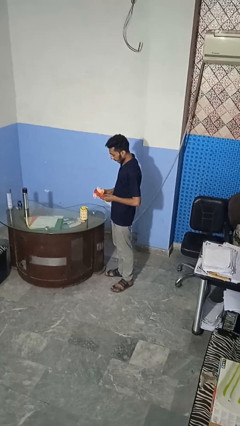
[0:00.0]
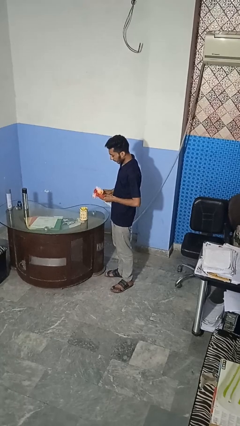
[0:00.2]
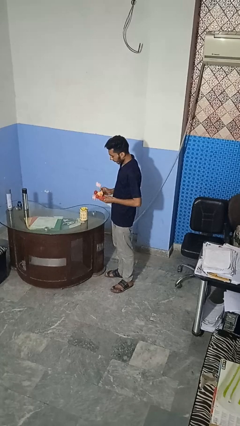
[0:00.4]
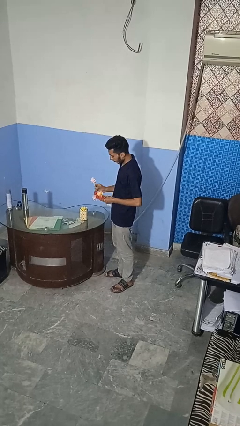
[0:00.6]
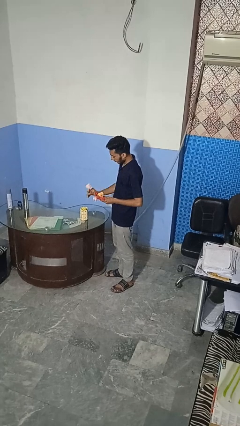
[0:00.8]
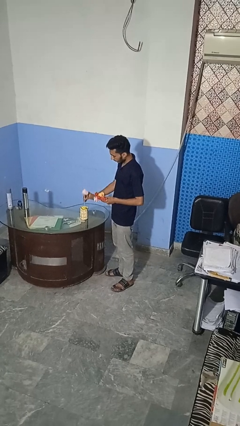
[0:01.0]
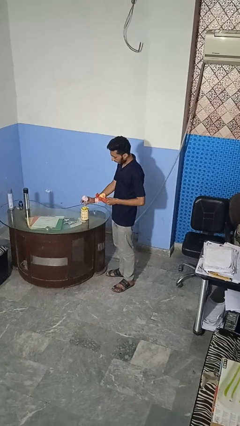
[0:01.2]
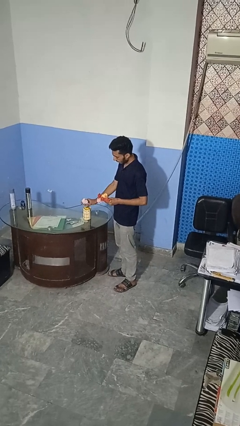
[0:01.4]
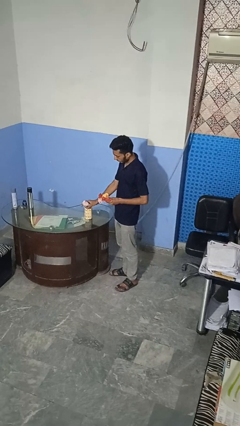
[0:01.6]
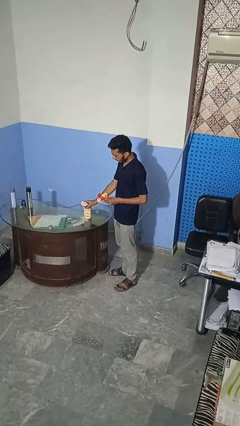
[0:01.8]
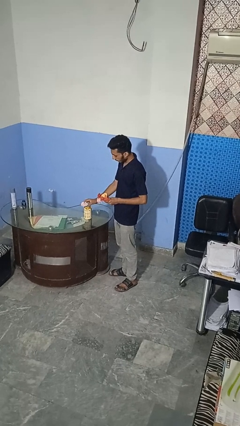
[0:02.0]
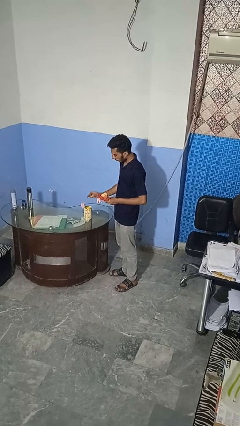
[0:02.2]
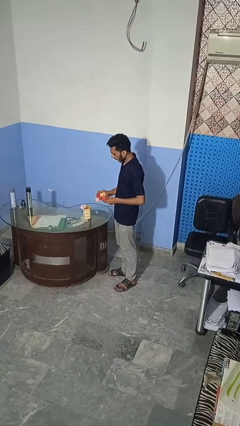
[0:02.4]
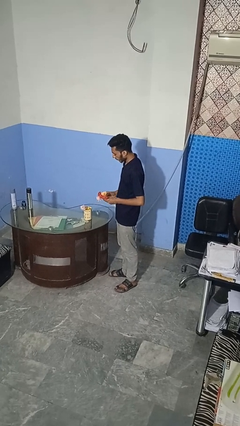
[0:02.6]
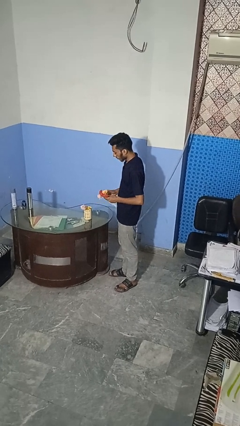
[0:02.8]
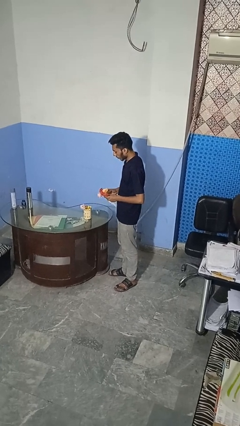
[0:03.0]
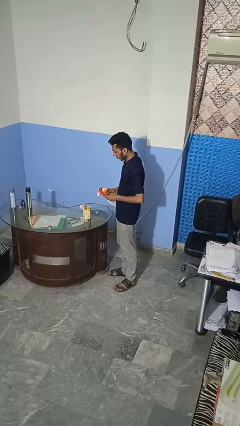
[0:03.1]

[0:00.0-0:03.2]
person arranges flowers in vase

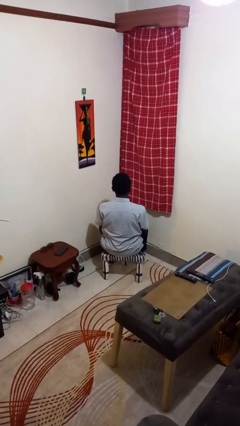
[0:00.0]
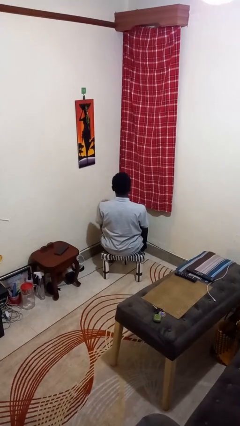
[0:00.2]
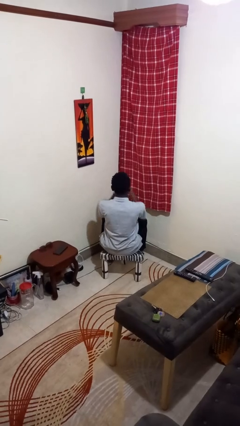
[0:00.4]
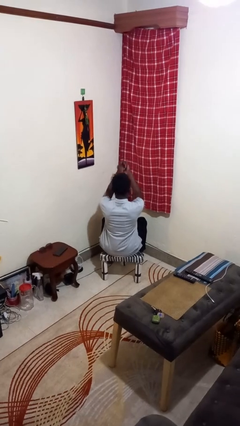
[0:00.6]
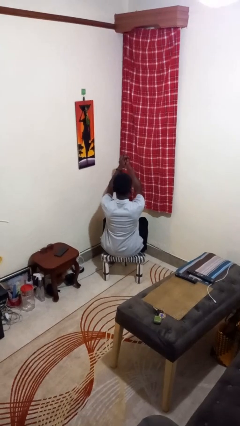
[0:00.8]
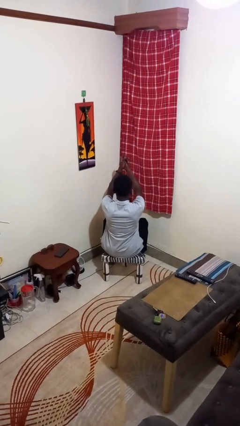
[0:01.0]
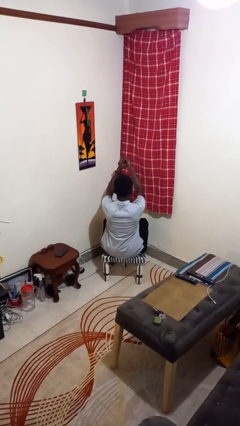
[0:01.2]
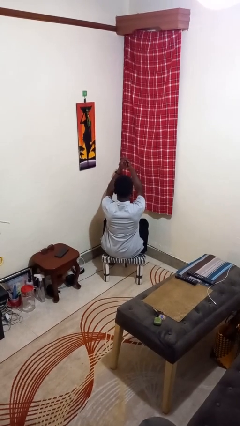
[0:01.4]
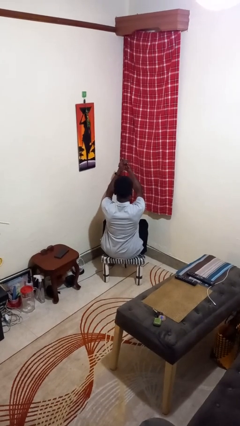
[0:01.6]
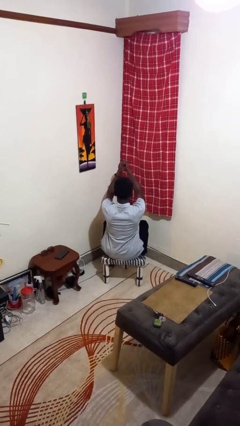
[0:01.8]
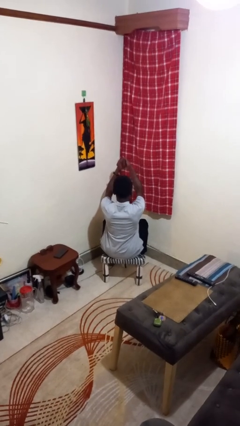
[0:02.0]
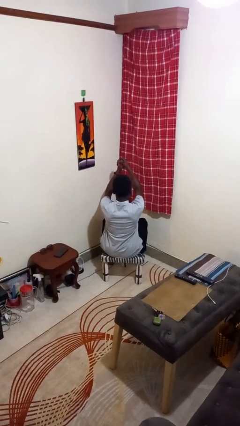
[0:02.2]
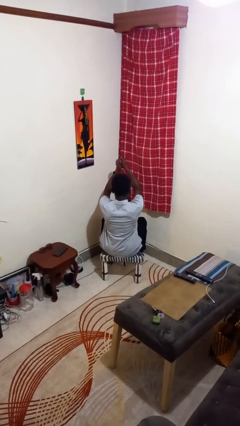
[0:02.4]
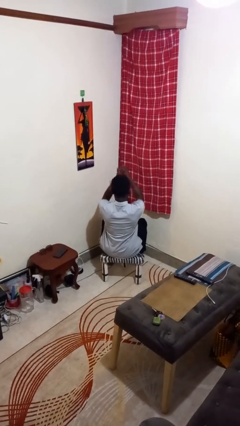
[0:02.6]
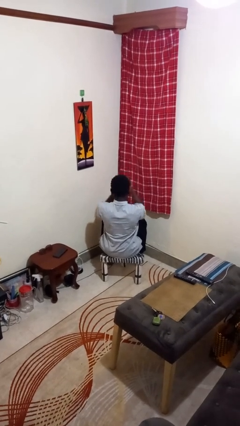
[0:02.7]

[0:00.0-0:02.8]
person cracks knuckles

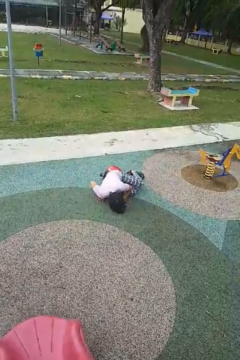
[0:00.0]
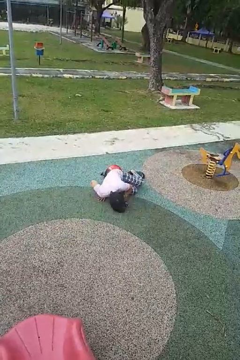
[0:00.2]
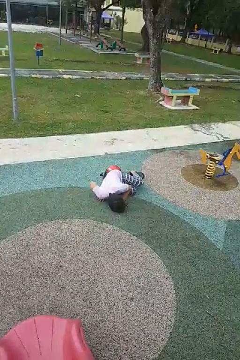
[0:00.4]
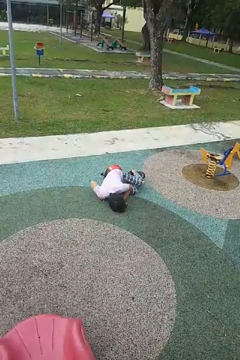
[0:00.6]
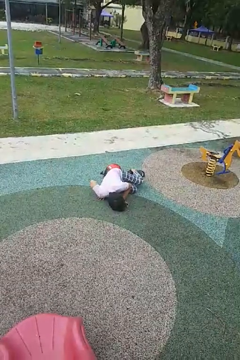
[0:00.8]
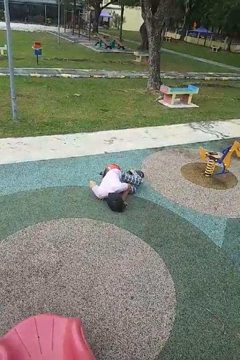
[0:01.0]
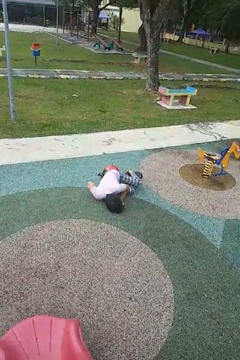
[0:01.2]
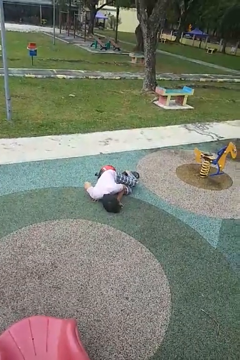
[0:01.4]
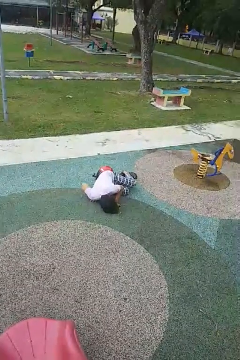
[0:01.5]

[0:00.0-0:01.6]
person lies down on floor

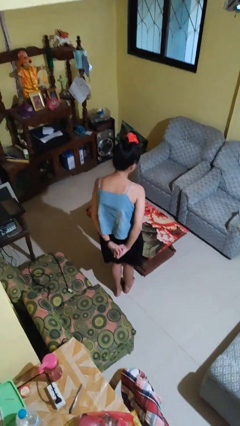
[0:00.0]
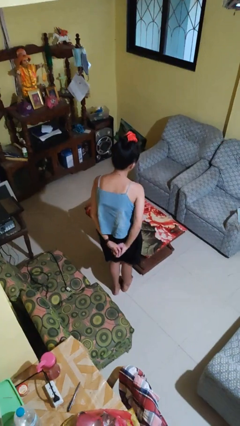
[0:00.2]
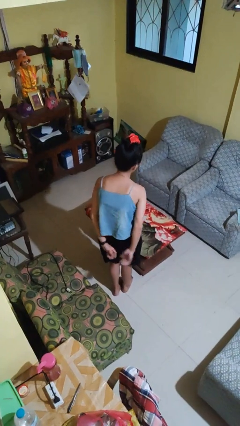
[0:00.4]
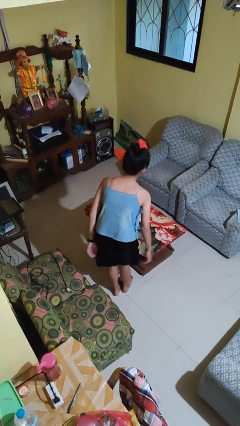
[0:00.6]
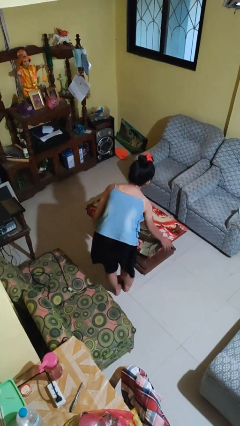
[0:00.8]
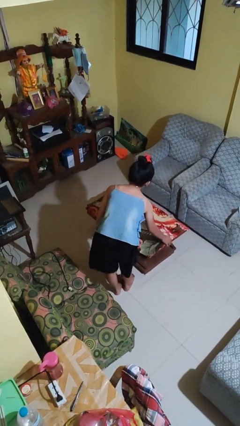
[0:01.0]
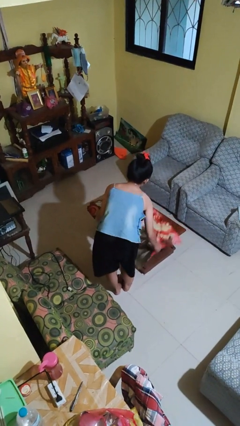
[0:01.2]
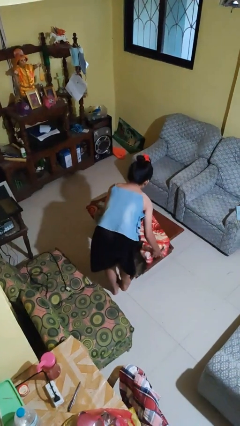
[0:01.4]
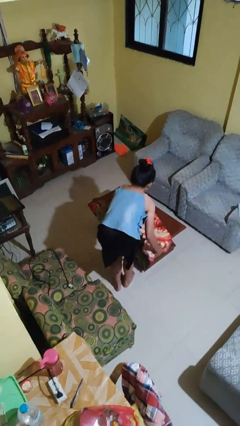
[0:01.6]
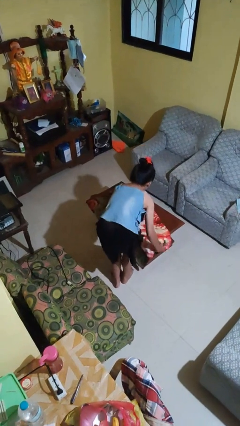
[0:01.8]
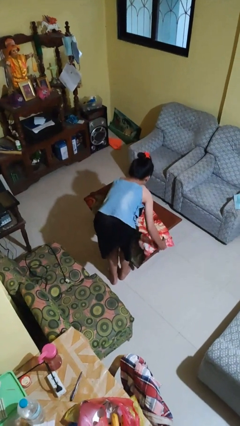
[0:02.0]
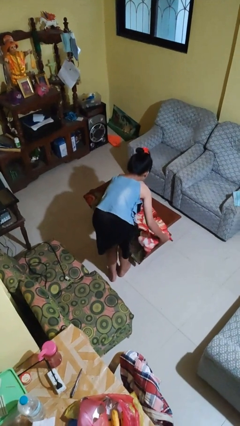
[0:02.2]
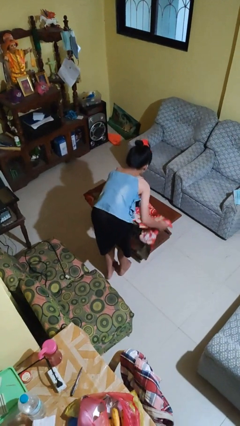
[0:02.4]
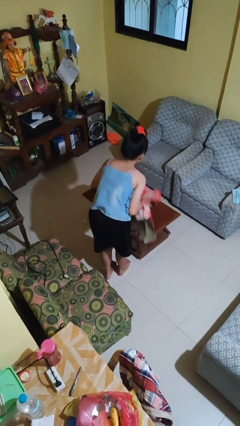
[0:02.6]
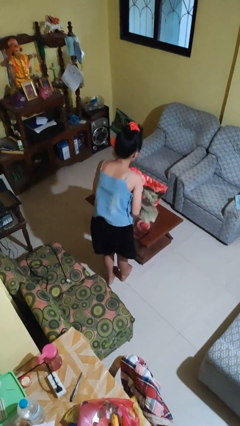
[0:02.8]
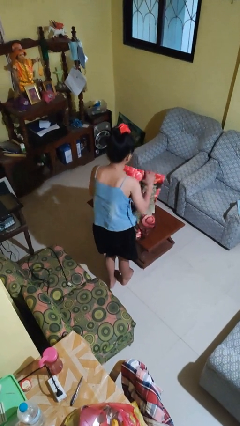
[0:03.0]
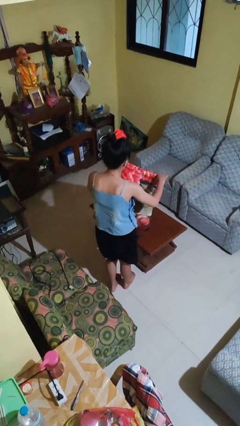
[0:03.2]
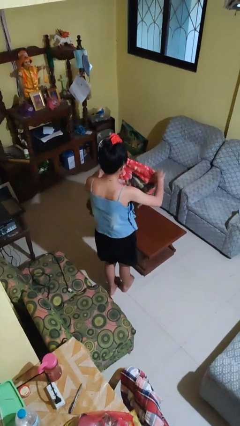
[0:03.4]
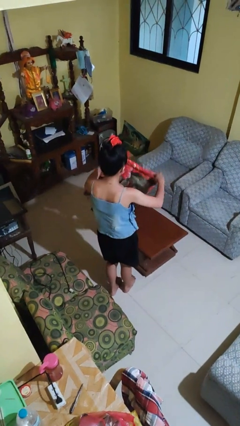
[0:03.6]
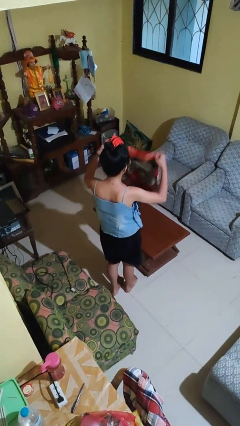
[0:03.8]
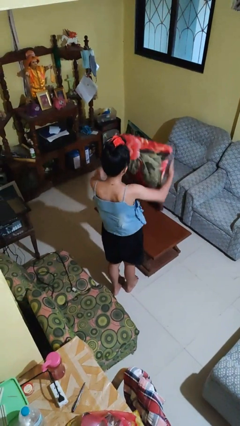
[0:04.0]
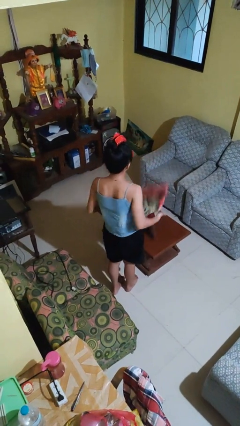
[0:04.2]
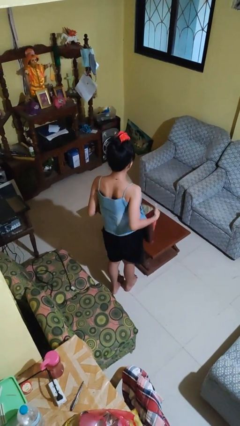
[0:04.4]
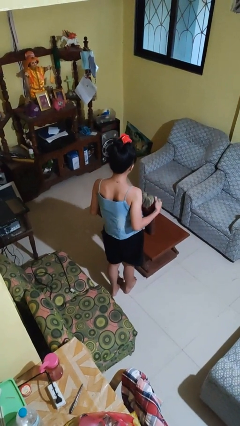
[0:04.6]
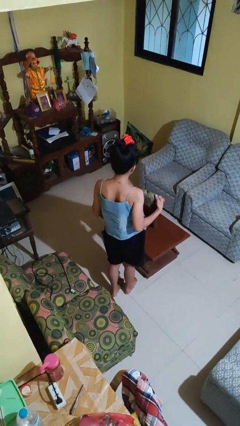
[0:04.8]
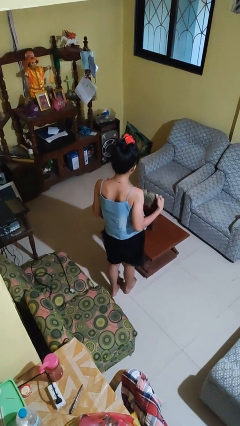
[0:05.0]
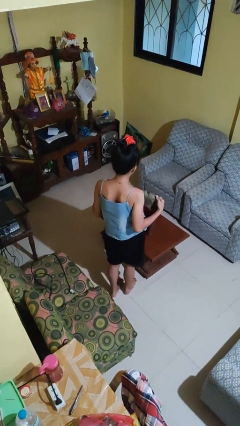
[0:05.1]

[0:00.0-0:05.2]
person folds tablecloth

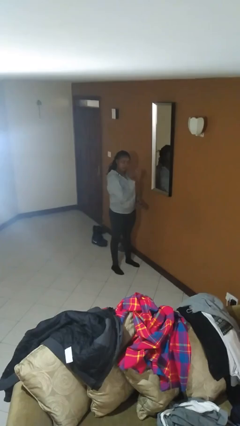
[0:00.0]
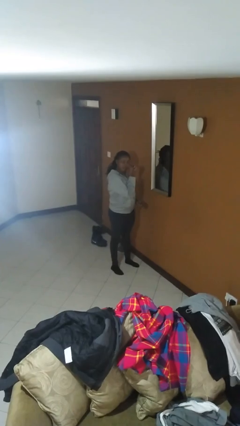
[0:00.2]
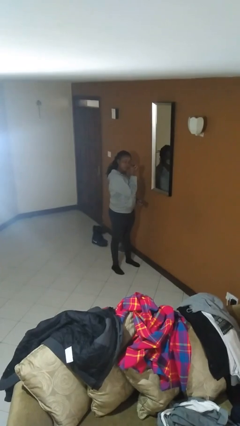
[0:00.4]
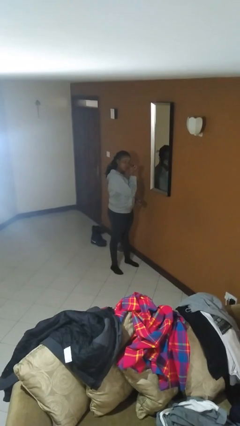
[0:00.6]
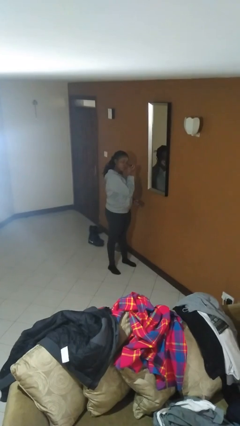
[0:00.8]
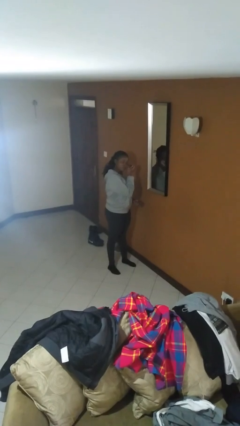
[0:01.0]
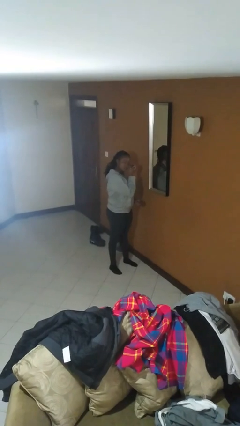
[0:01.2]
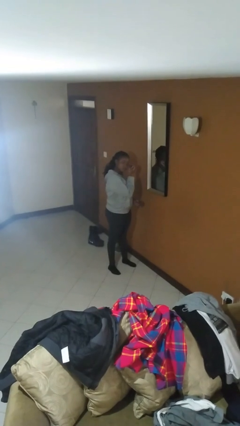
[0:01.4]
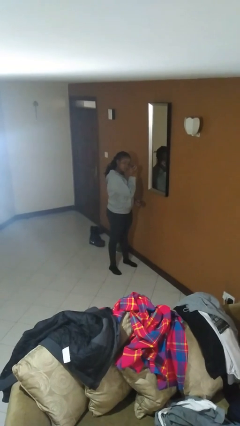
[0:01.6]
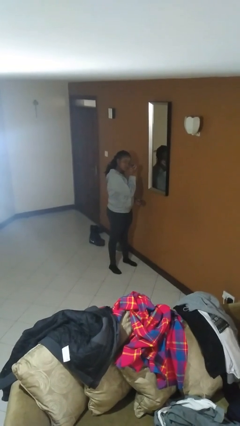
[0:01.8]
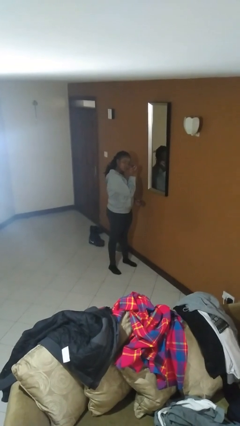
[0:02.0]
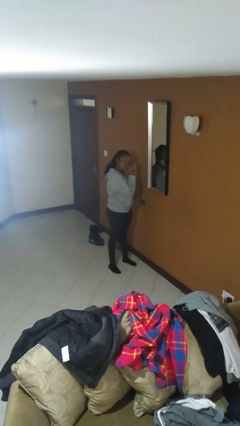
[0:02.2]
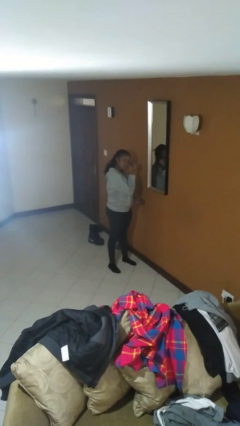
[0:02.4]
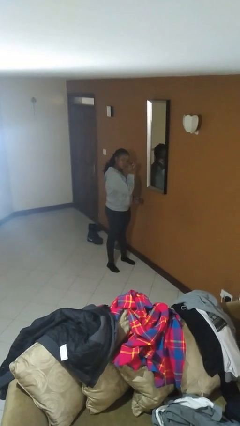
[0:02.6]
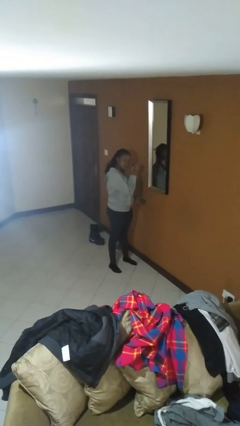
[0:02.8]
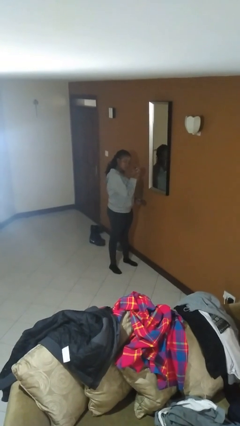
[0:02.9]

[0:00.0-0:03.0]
person applies eye makeup

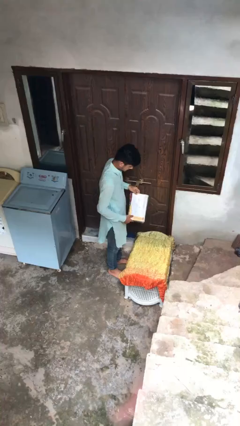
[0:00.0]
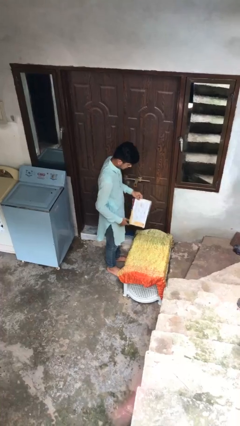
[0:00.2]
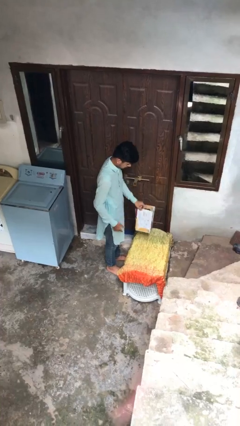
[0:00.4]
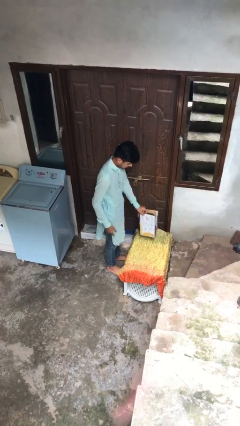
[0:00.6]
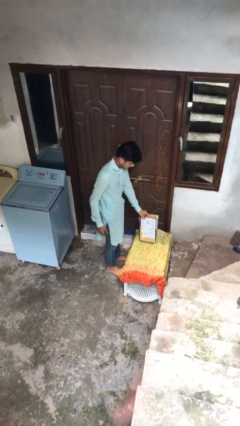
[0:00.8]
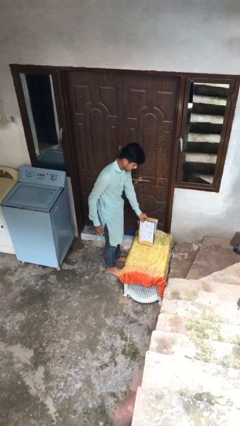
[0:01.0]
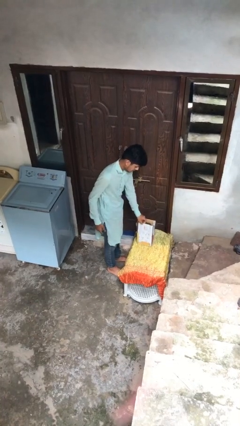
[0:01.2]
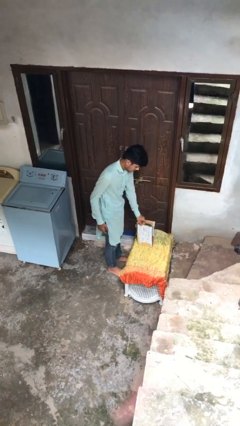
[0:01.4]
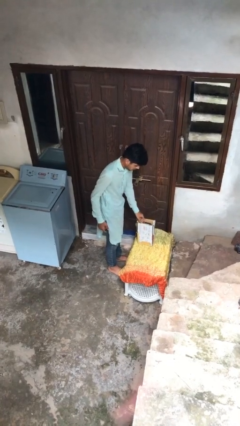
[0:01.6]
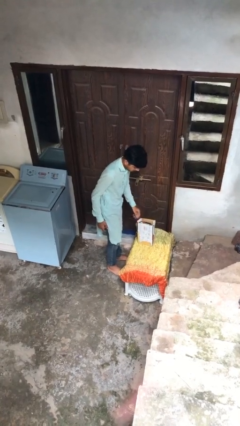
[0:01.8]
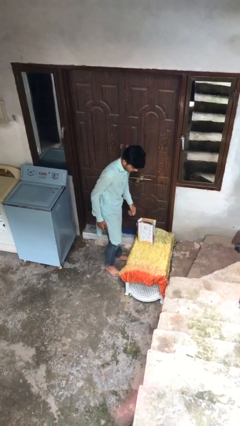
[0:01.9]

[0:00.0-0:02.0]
person puts down object on table
